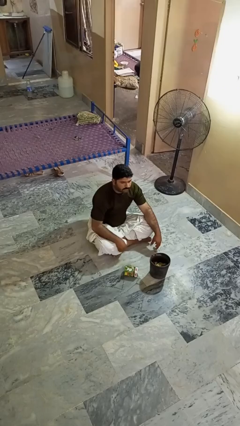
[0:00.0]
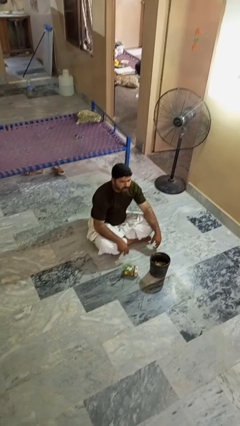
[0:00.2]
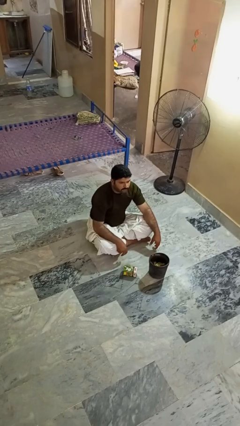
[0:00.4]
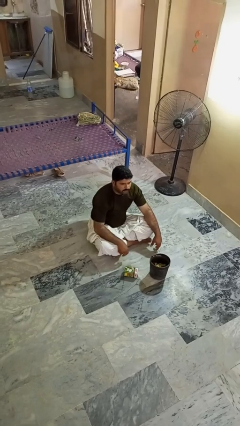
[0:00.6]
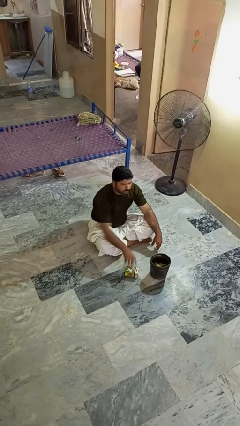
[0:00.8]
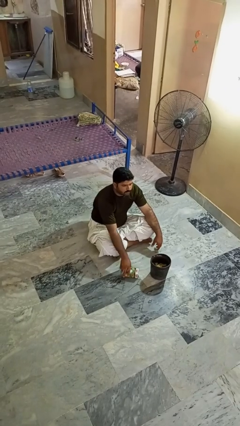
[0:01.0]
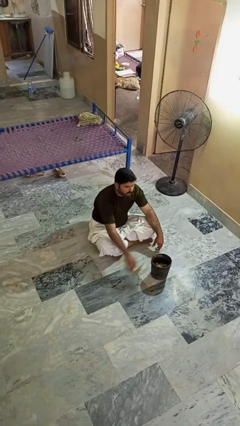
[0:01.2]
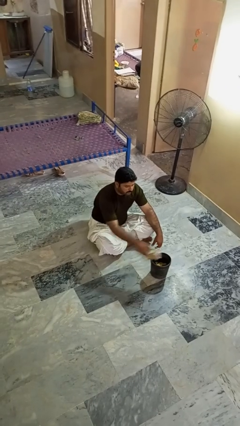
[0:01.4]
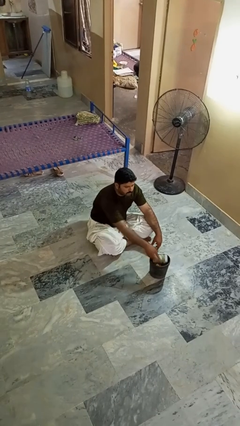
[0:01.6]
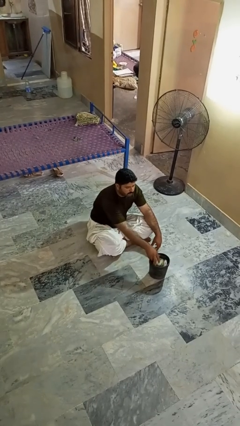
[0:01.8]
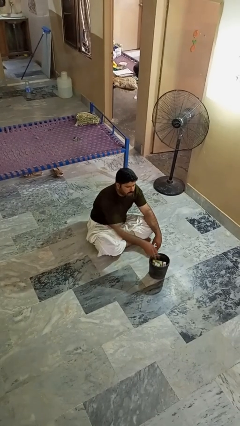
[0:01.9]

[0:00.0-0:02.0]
person puts object into basket

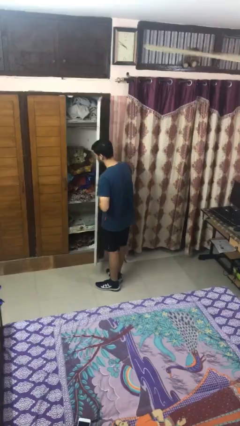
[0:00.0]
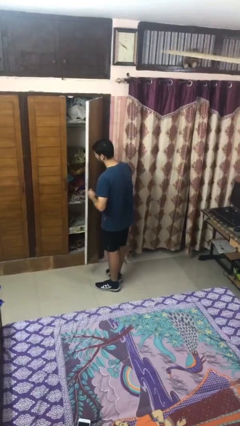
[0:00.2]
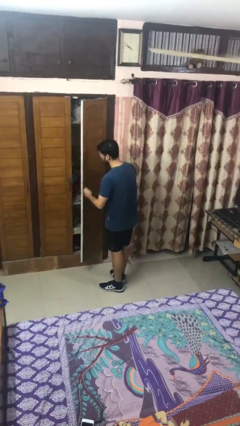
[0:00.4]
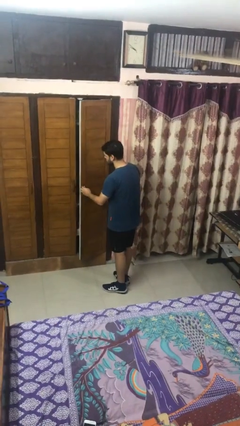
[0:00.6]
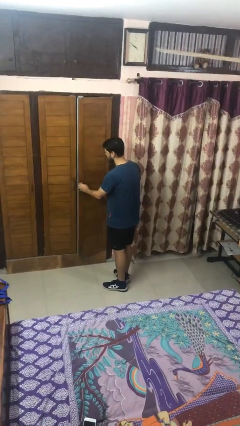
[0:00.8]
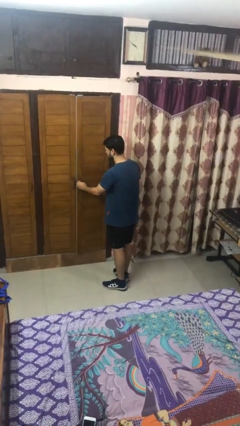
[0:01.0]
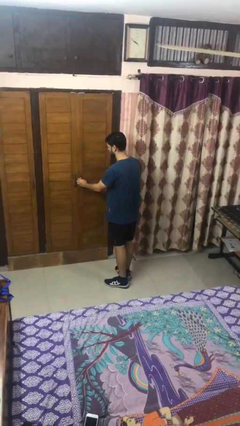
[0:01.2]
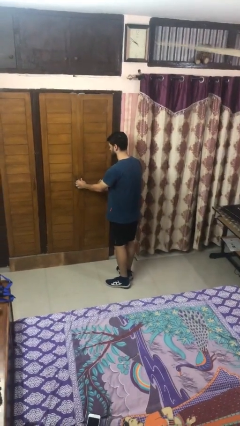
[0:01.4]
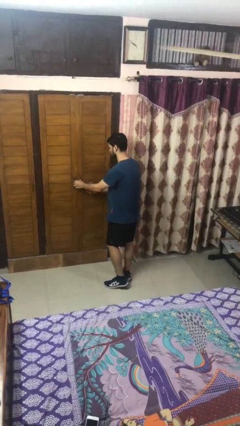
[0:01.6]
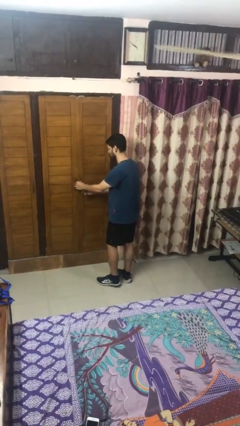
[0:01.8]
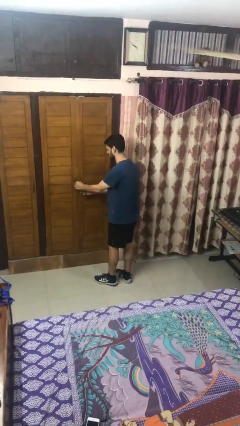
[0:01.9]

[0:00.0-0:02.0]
person closes facility door

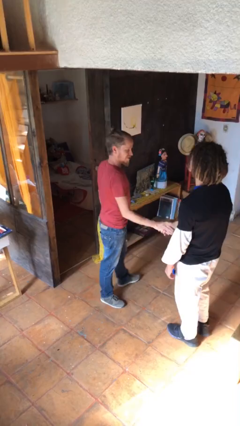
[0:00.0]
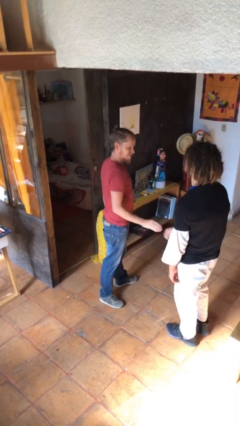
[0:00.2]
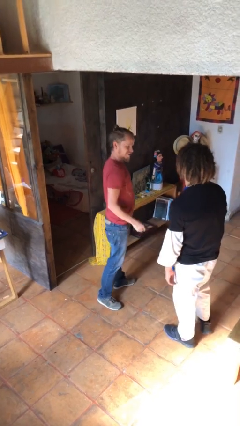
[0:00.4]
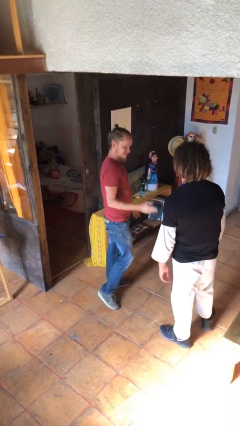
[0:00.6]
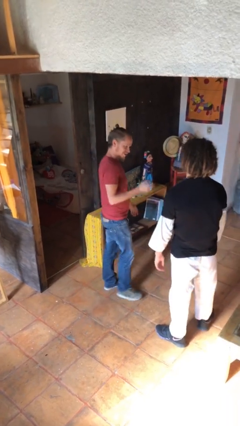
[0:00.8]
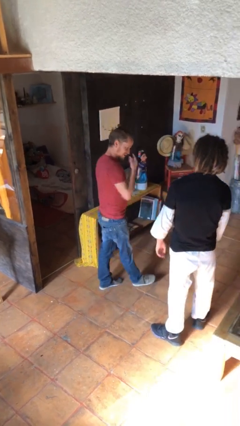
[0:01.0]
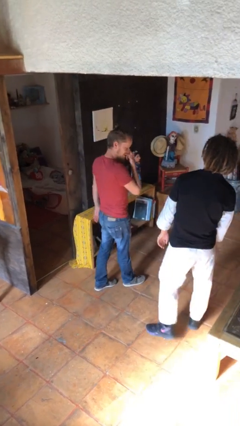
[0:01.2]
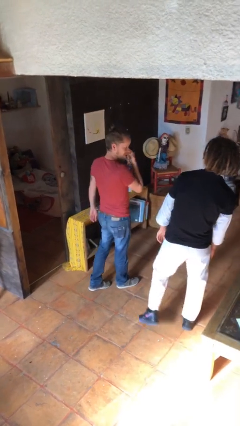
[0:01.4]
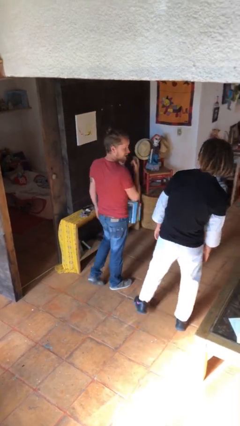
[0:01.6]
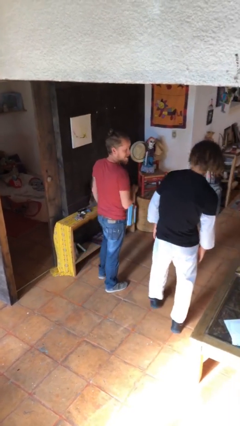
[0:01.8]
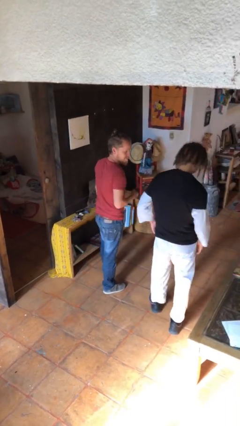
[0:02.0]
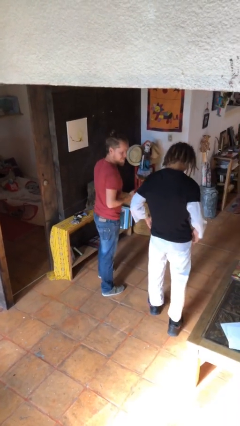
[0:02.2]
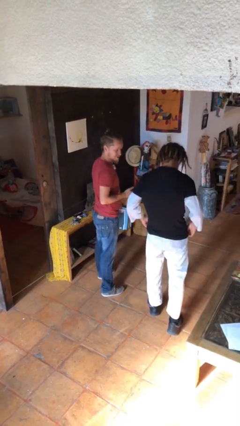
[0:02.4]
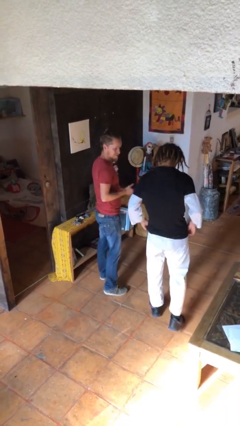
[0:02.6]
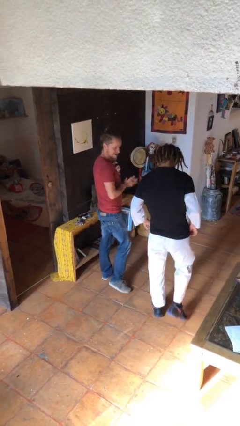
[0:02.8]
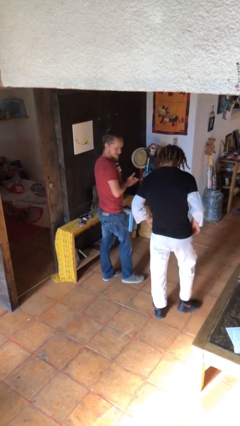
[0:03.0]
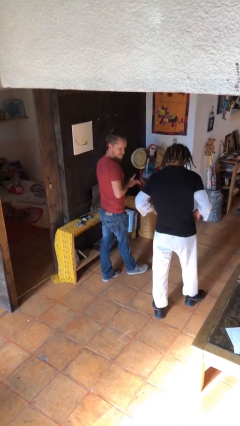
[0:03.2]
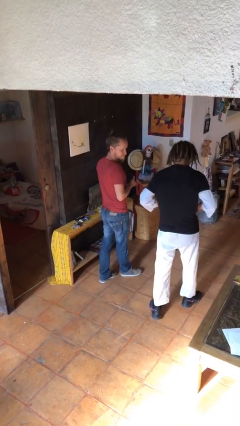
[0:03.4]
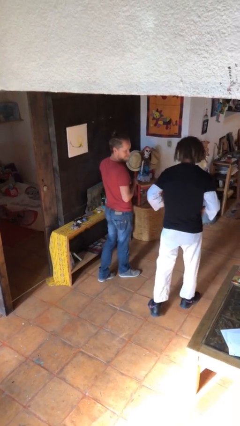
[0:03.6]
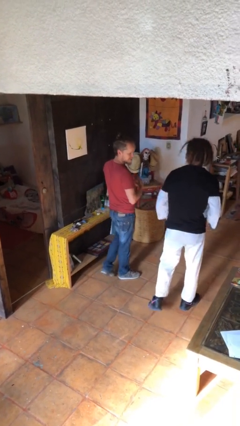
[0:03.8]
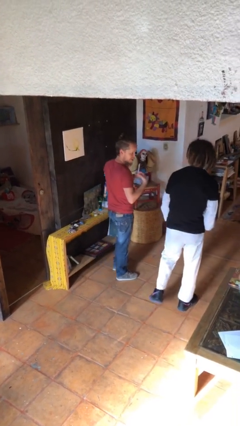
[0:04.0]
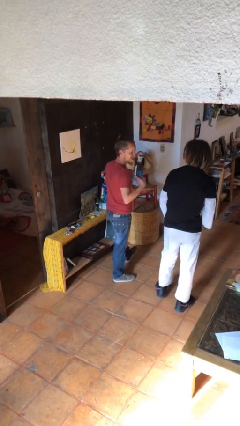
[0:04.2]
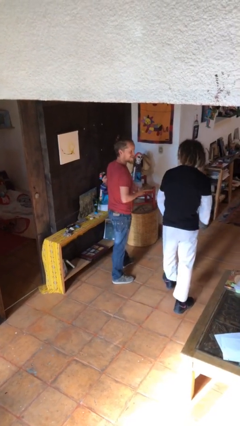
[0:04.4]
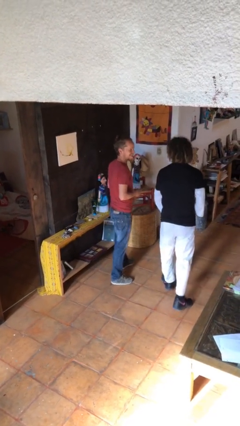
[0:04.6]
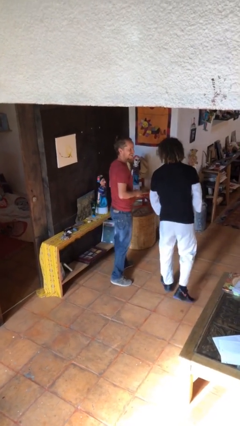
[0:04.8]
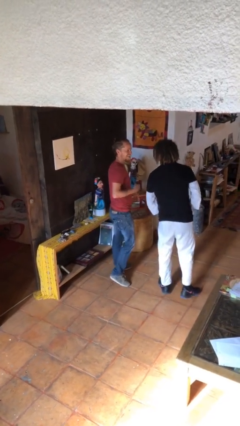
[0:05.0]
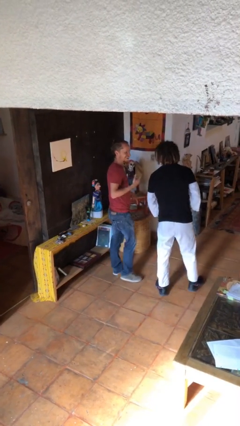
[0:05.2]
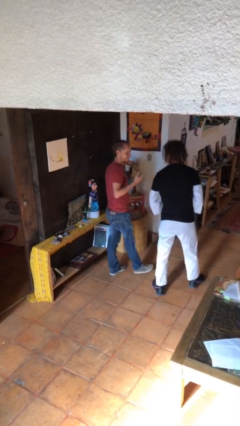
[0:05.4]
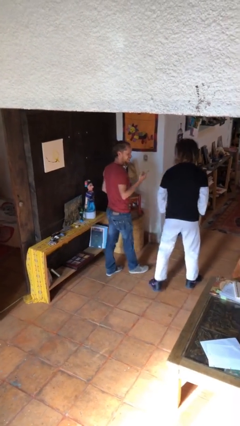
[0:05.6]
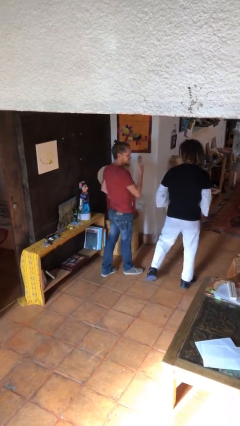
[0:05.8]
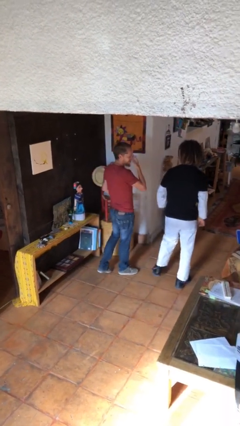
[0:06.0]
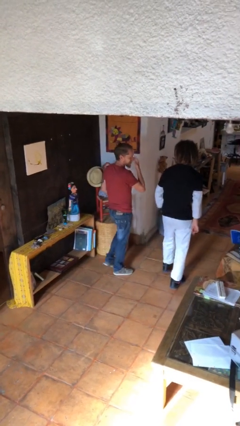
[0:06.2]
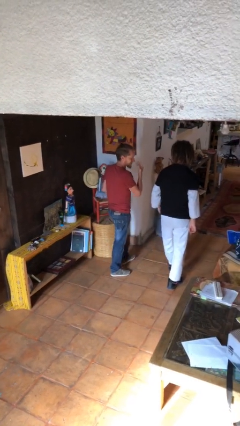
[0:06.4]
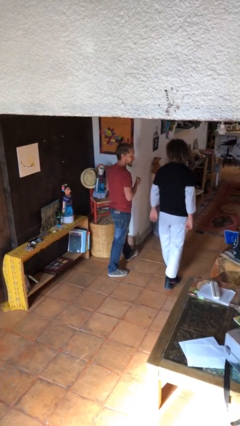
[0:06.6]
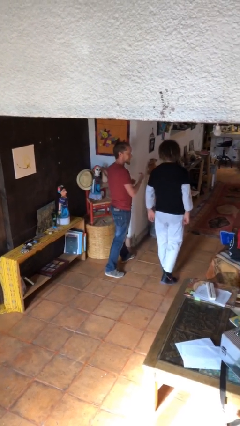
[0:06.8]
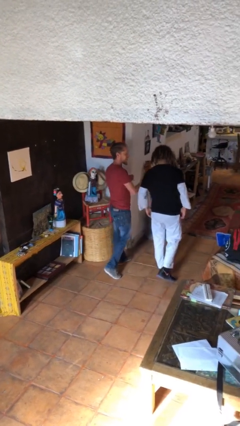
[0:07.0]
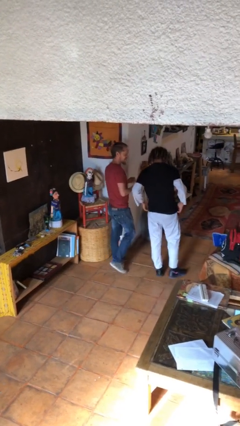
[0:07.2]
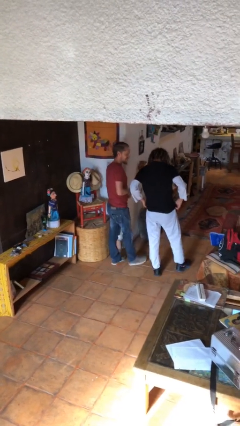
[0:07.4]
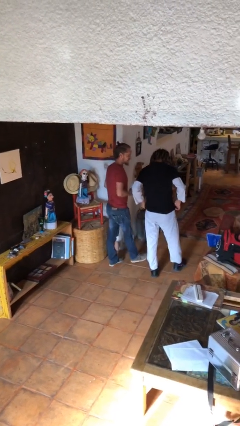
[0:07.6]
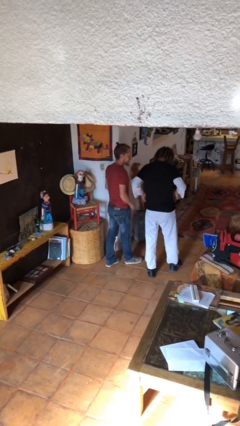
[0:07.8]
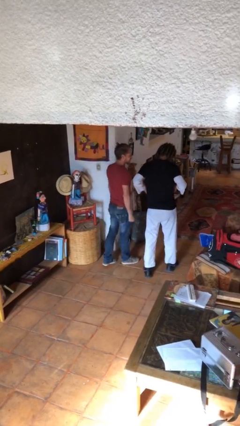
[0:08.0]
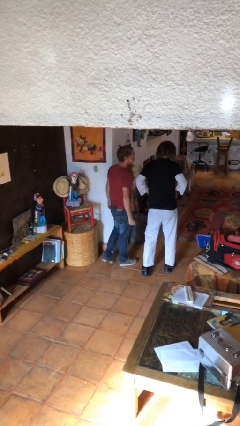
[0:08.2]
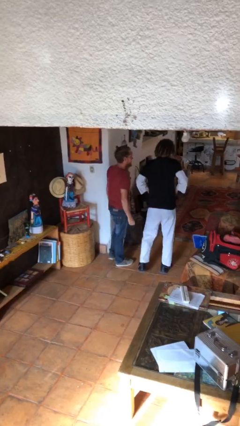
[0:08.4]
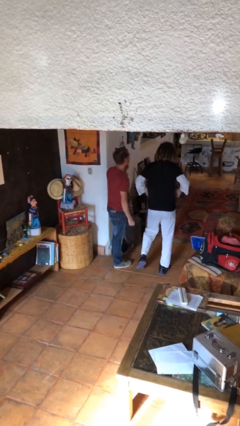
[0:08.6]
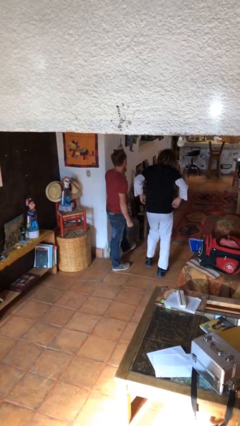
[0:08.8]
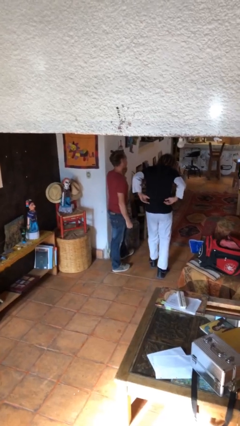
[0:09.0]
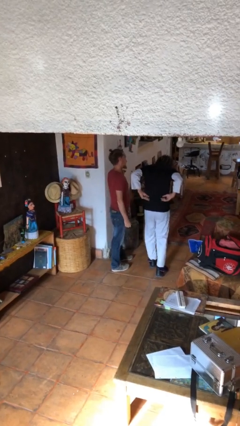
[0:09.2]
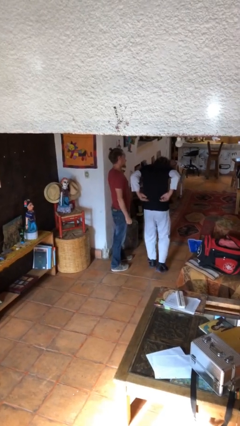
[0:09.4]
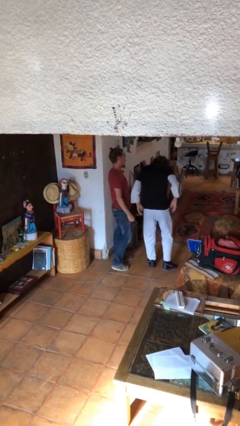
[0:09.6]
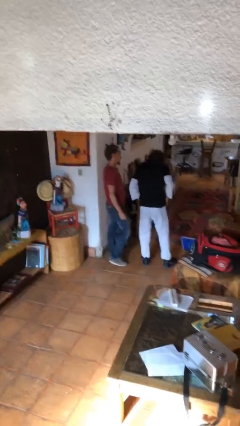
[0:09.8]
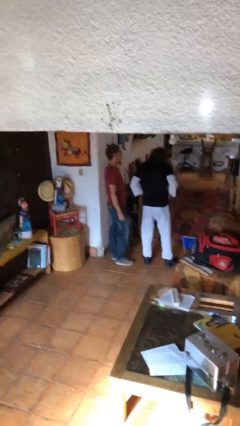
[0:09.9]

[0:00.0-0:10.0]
person talks to person

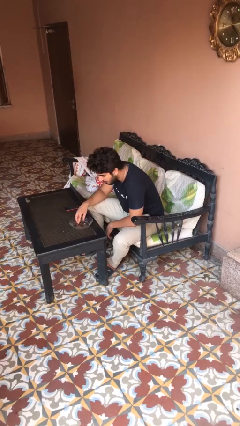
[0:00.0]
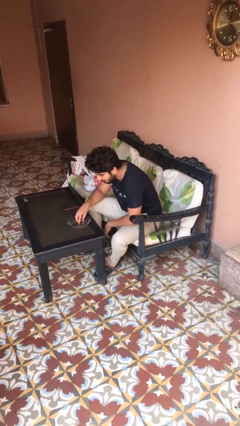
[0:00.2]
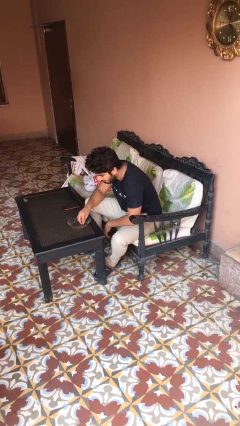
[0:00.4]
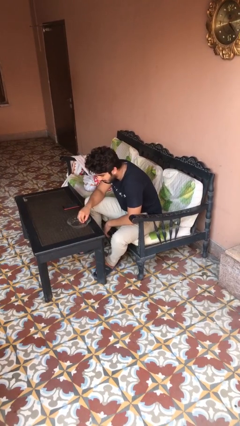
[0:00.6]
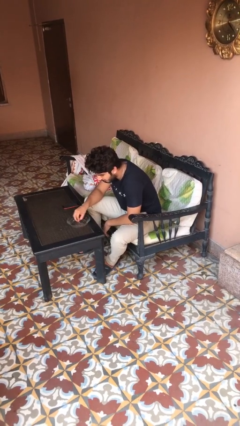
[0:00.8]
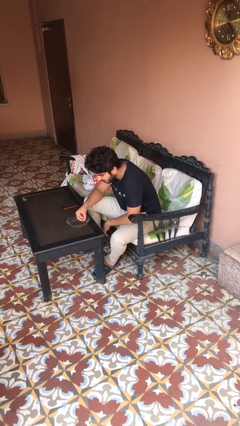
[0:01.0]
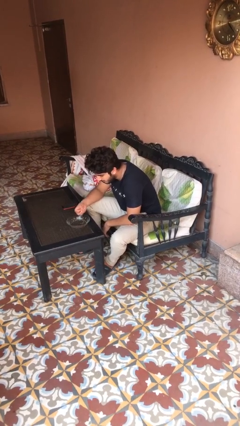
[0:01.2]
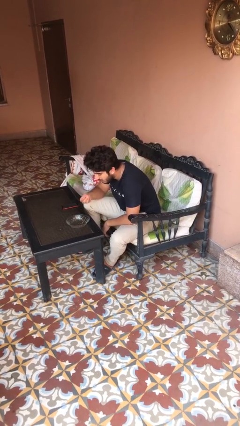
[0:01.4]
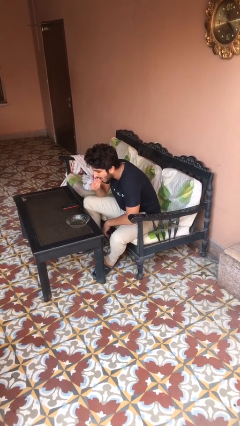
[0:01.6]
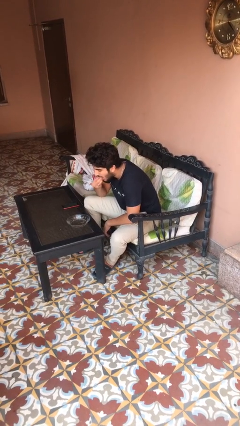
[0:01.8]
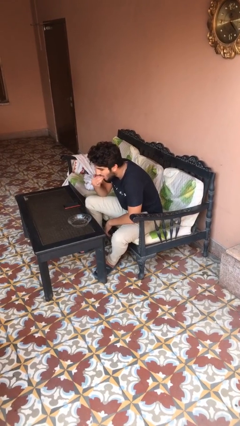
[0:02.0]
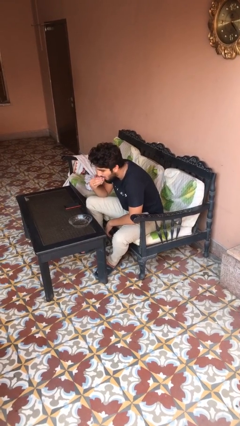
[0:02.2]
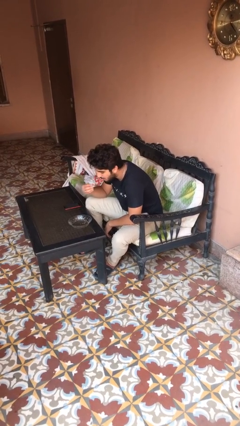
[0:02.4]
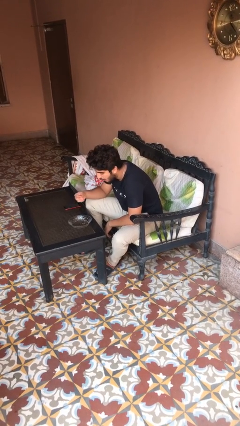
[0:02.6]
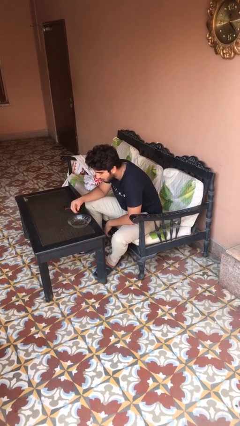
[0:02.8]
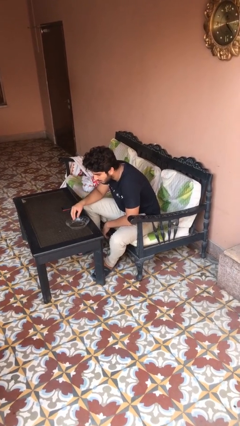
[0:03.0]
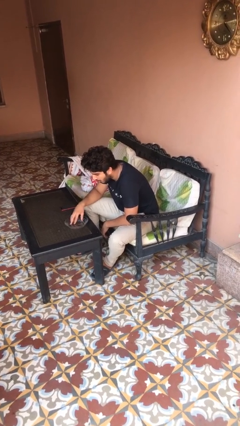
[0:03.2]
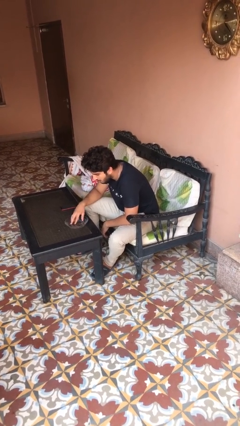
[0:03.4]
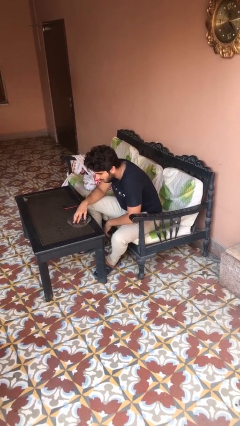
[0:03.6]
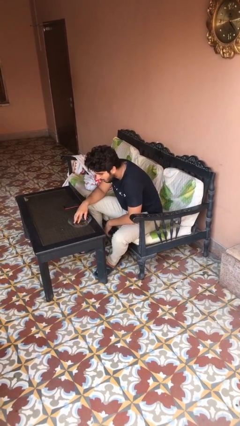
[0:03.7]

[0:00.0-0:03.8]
person eats with hands
